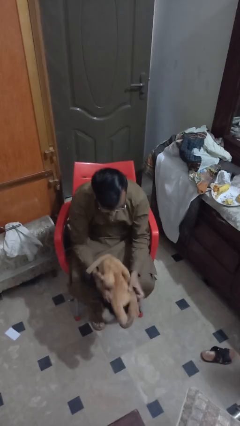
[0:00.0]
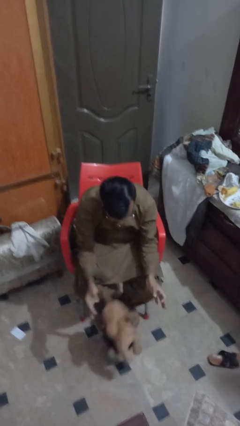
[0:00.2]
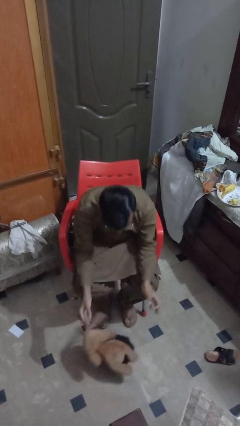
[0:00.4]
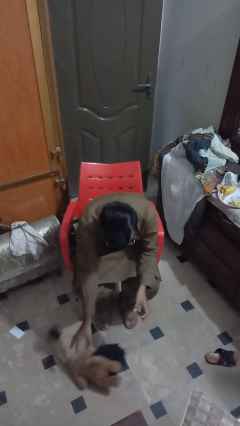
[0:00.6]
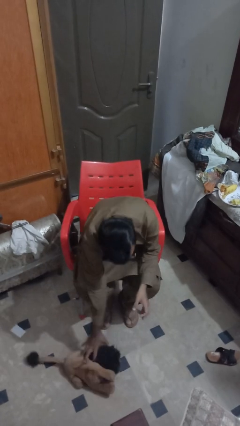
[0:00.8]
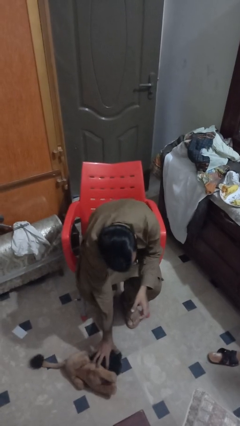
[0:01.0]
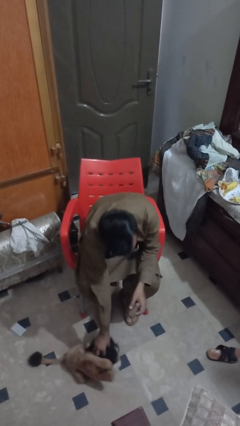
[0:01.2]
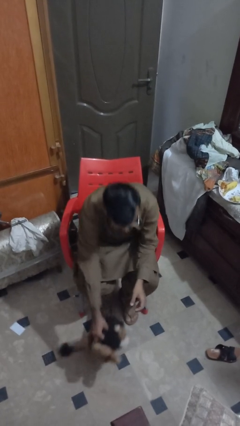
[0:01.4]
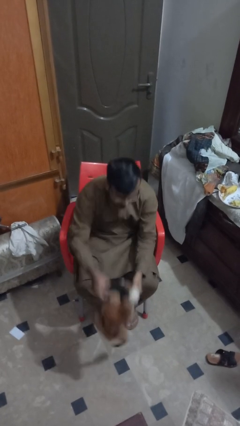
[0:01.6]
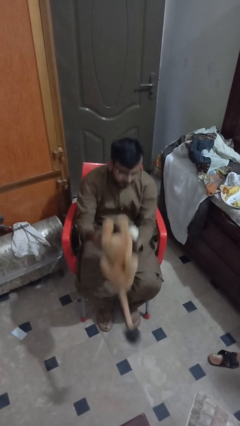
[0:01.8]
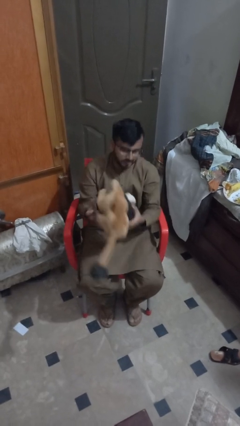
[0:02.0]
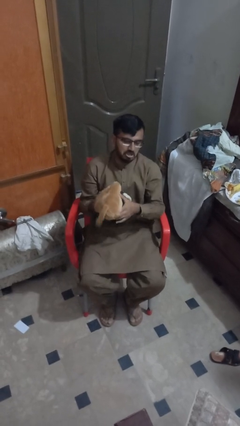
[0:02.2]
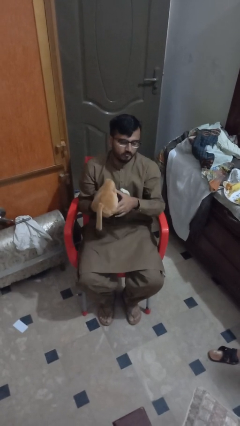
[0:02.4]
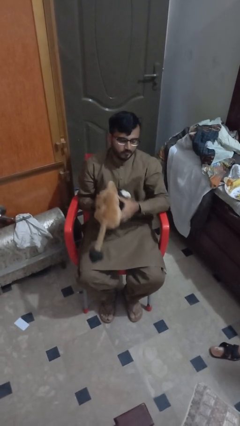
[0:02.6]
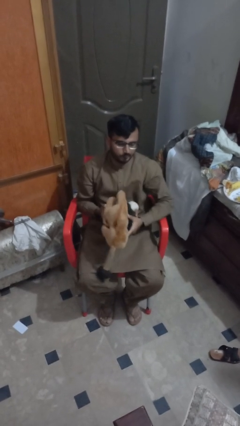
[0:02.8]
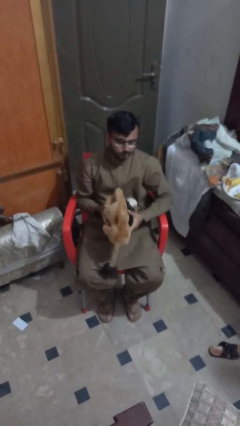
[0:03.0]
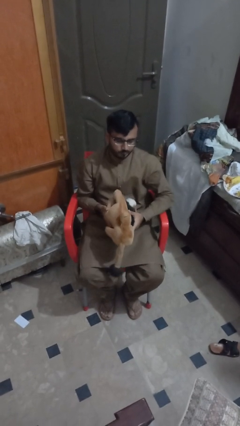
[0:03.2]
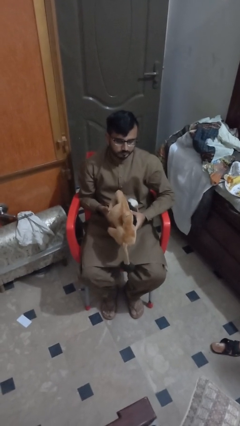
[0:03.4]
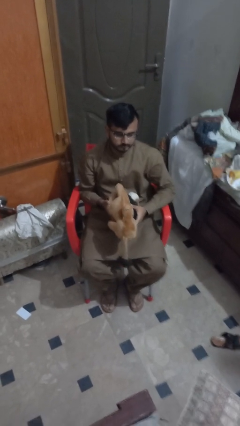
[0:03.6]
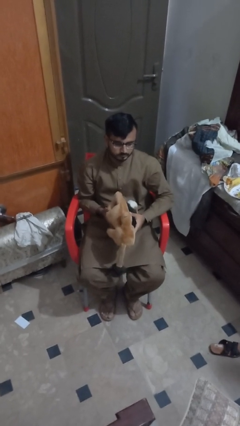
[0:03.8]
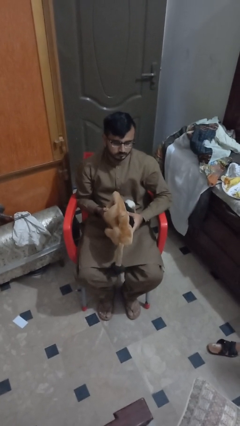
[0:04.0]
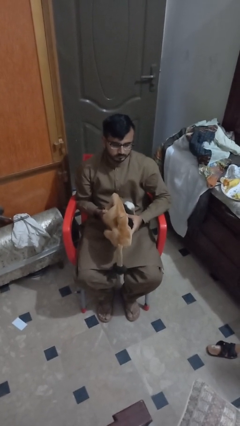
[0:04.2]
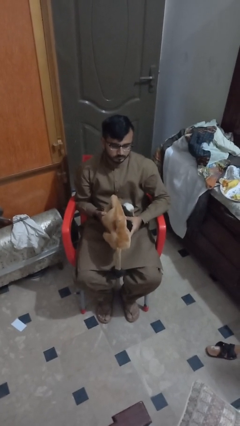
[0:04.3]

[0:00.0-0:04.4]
person picks up object from floor

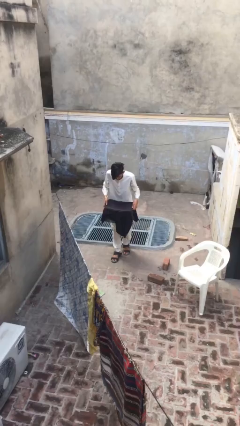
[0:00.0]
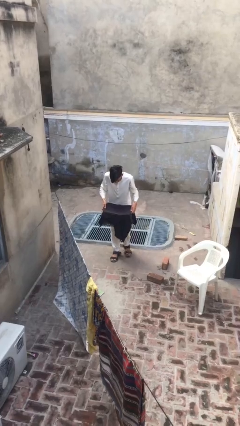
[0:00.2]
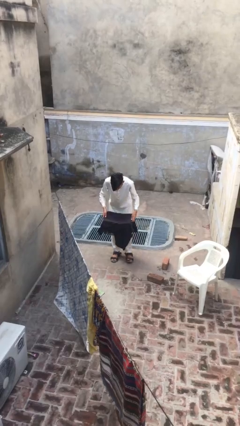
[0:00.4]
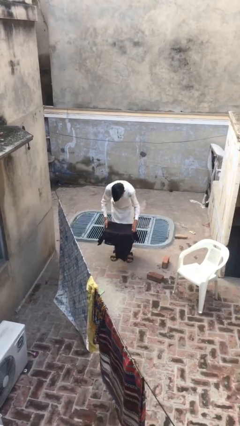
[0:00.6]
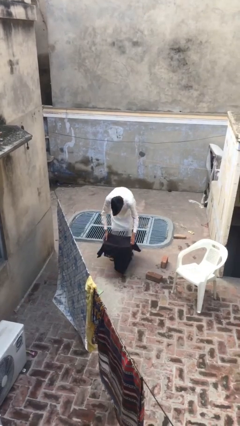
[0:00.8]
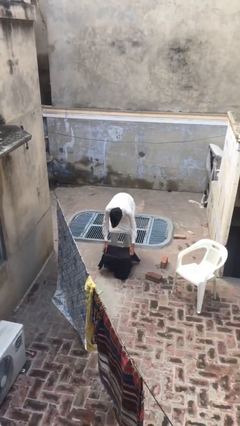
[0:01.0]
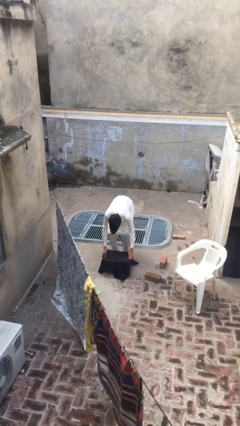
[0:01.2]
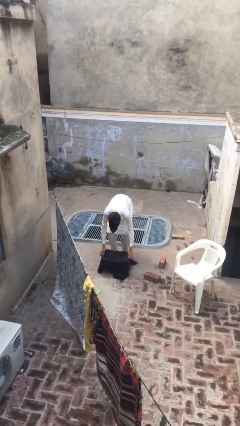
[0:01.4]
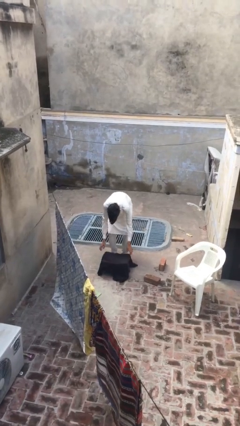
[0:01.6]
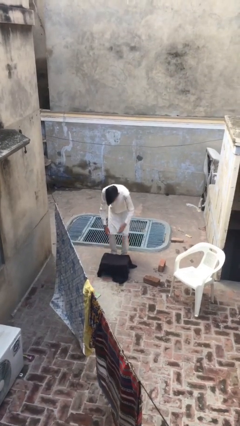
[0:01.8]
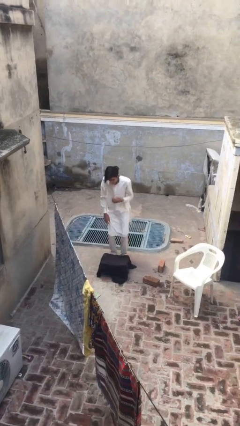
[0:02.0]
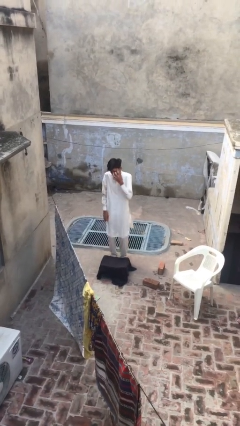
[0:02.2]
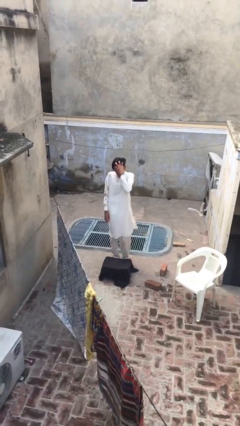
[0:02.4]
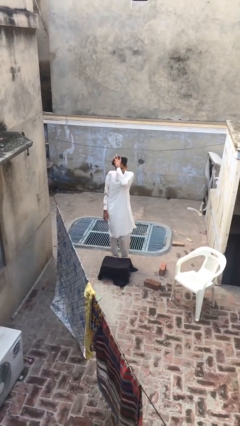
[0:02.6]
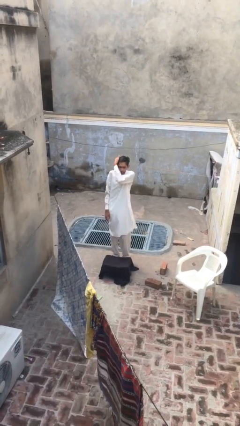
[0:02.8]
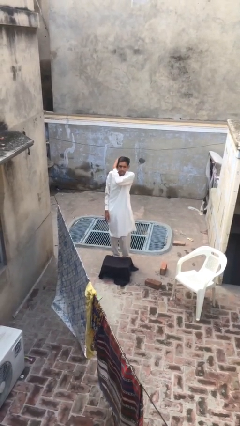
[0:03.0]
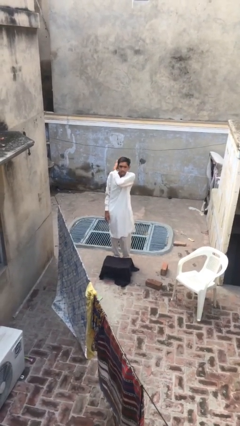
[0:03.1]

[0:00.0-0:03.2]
person puts down object on floor

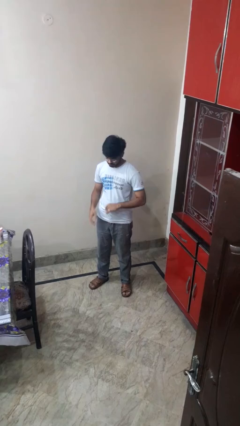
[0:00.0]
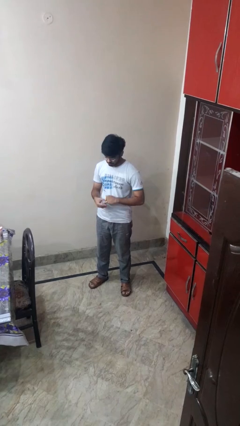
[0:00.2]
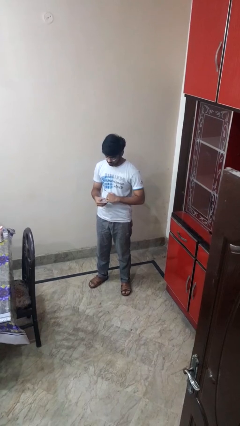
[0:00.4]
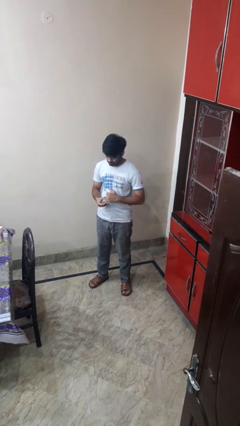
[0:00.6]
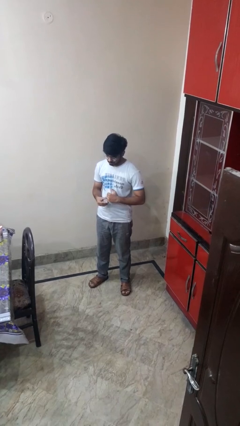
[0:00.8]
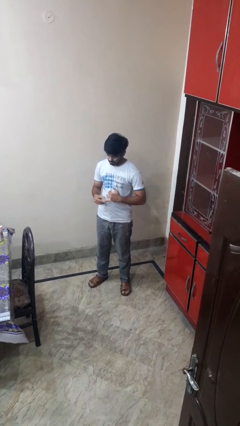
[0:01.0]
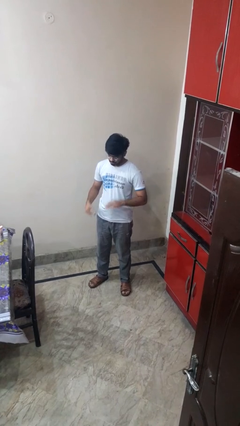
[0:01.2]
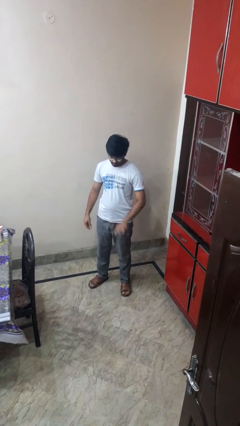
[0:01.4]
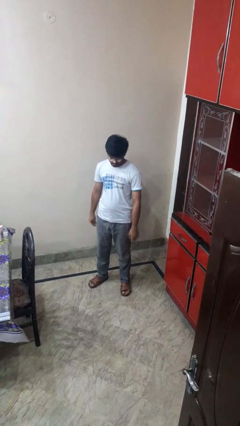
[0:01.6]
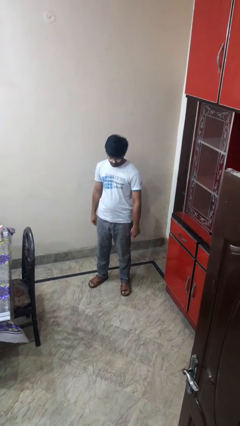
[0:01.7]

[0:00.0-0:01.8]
person takes off ring

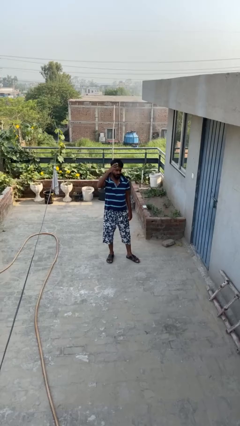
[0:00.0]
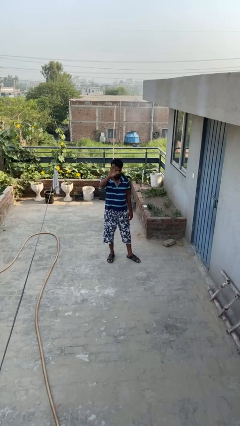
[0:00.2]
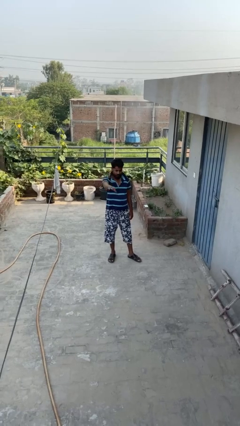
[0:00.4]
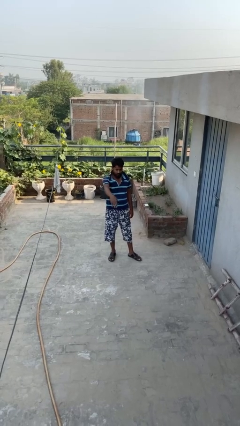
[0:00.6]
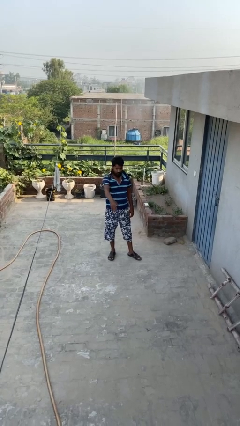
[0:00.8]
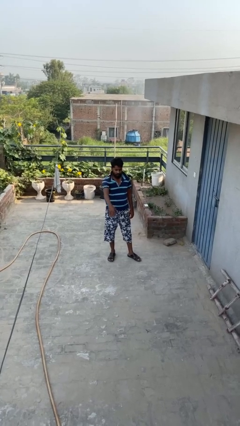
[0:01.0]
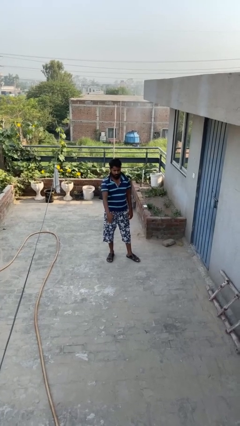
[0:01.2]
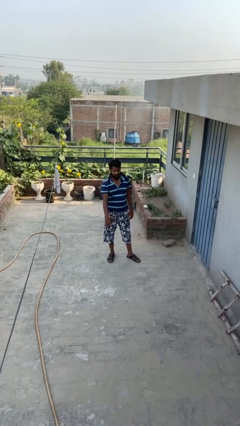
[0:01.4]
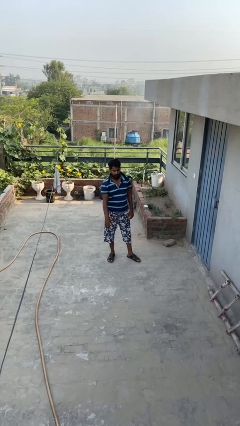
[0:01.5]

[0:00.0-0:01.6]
person gestures swipe down

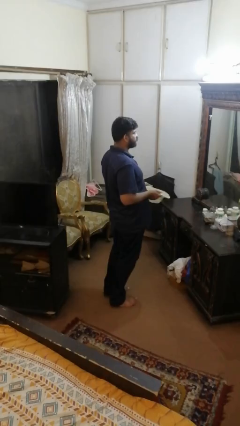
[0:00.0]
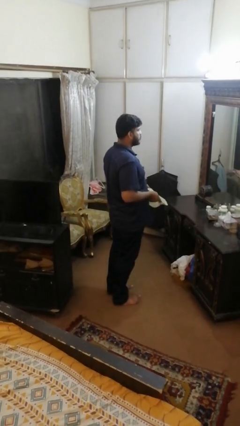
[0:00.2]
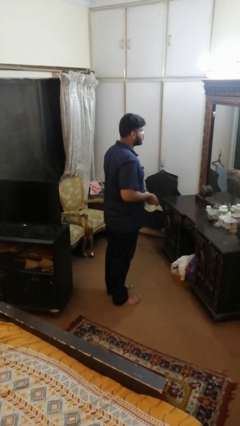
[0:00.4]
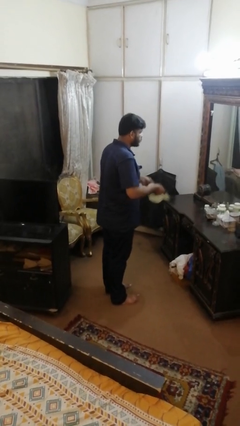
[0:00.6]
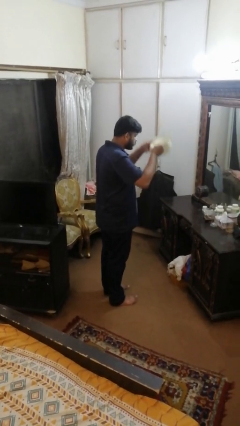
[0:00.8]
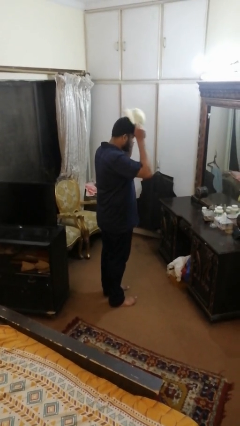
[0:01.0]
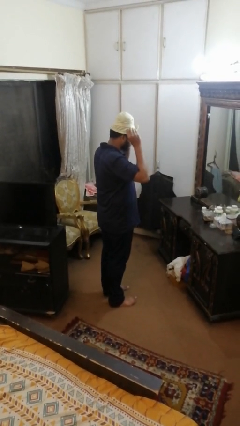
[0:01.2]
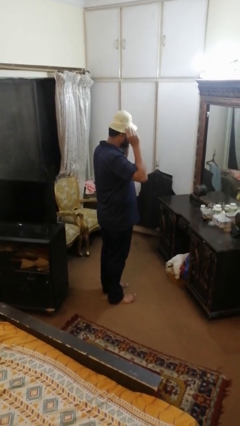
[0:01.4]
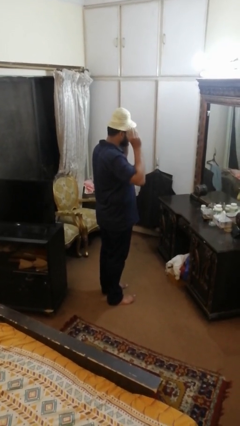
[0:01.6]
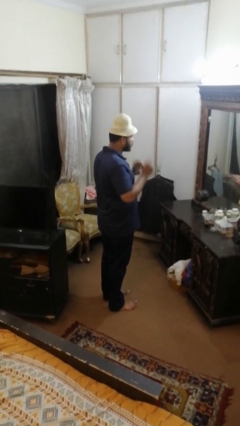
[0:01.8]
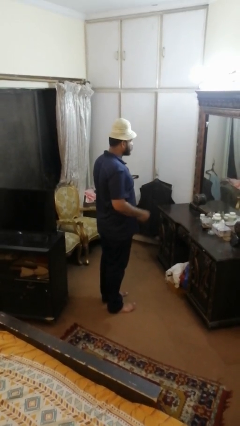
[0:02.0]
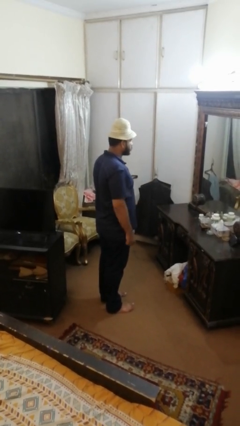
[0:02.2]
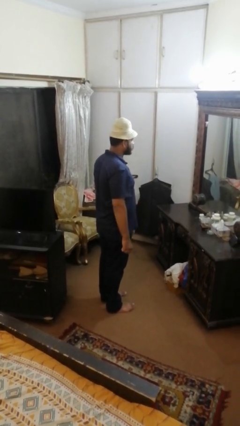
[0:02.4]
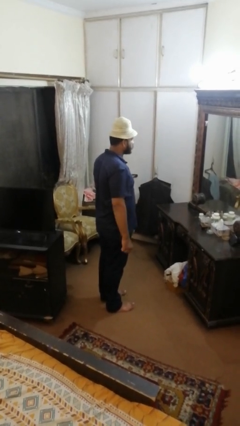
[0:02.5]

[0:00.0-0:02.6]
person puts on hat

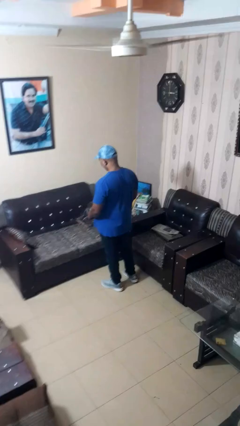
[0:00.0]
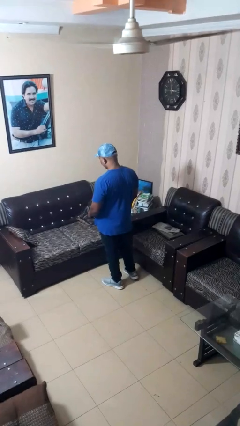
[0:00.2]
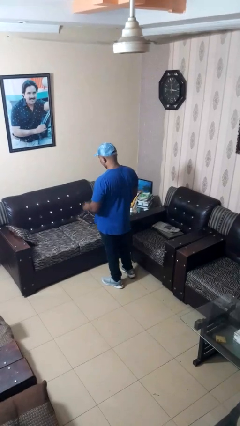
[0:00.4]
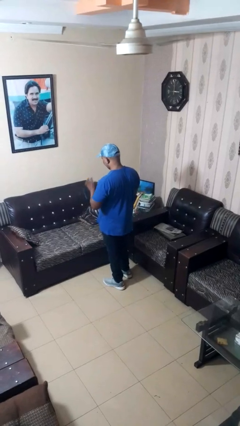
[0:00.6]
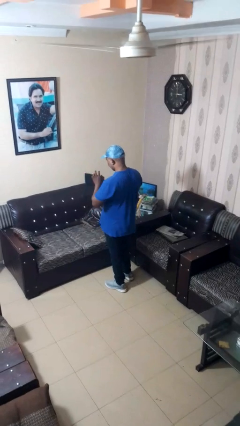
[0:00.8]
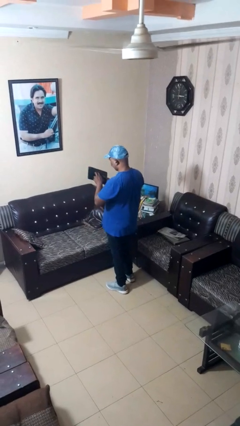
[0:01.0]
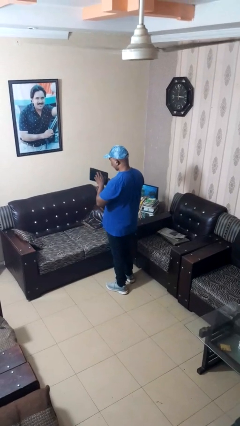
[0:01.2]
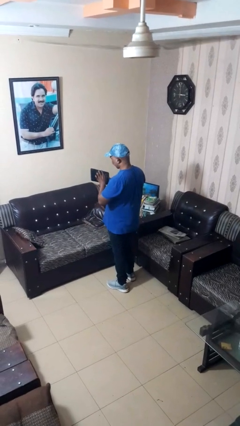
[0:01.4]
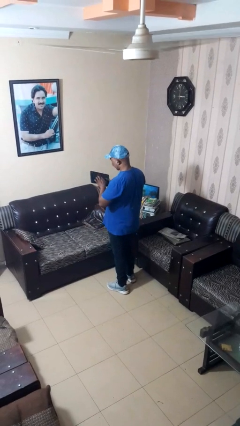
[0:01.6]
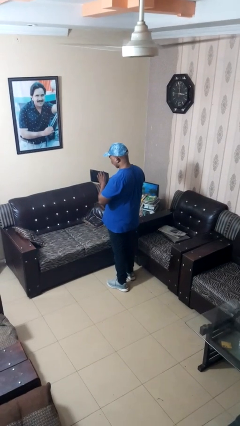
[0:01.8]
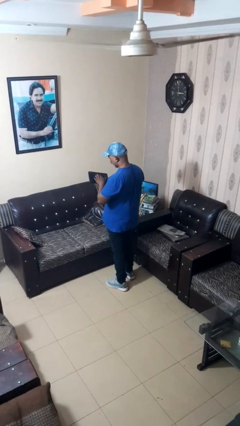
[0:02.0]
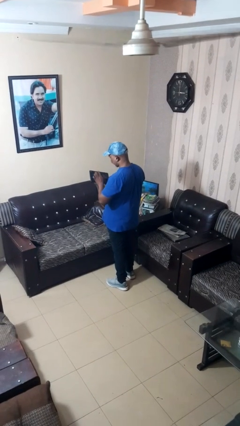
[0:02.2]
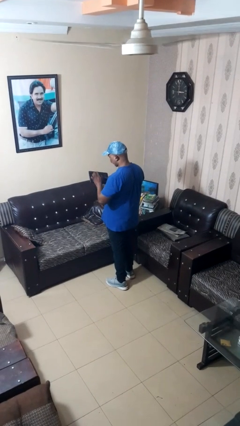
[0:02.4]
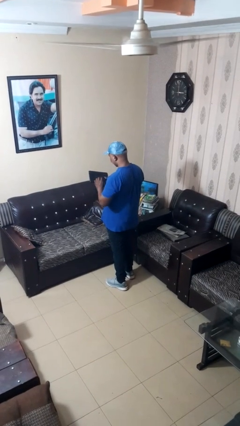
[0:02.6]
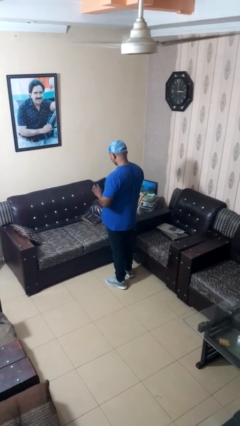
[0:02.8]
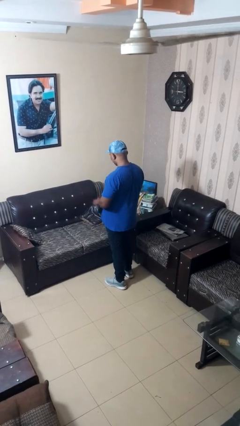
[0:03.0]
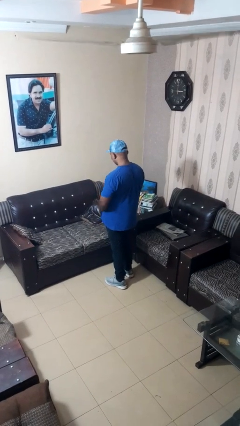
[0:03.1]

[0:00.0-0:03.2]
person taps object with finger

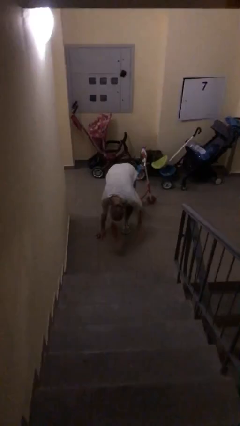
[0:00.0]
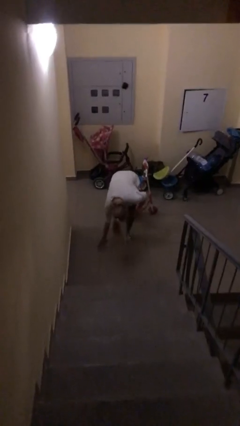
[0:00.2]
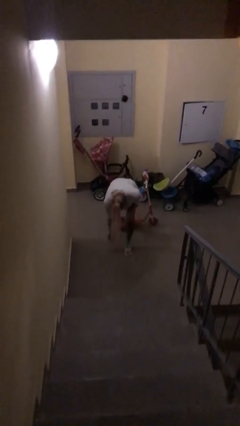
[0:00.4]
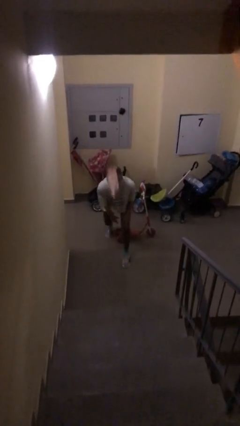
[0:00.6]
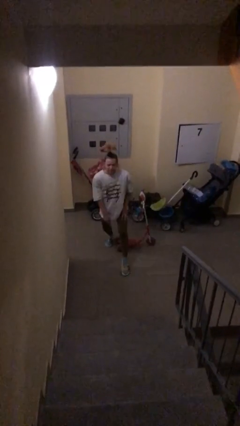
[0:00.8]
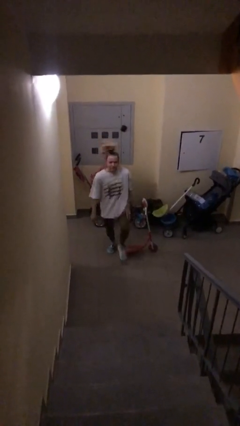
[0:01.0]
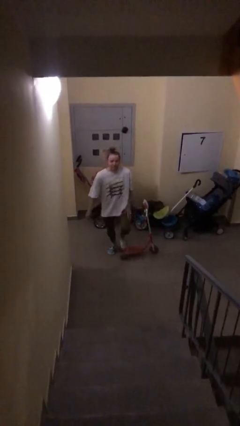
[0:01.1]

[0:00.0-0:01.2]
person stands up from floor
